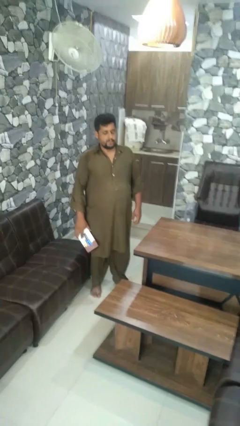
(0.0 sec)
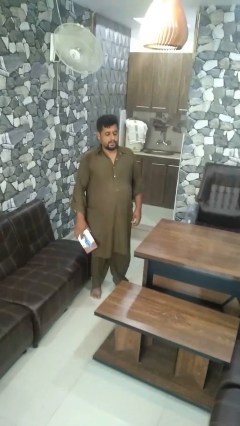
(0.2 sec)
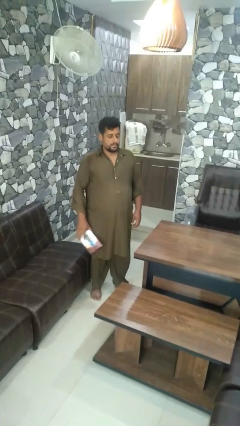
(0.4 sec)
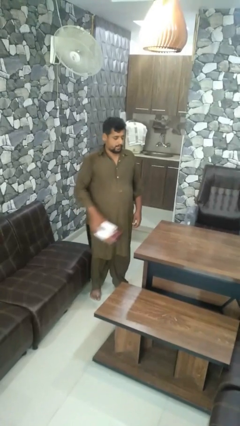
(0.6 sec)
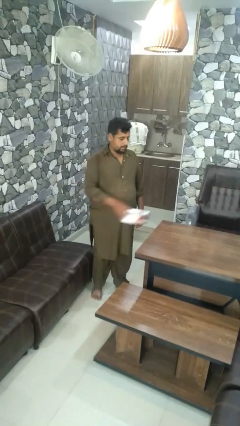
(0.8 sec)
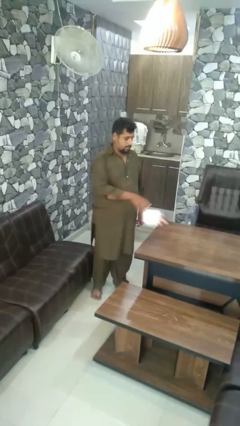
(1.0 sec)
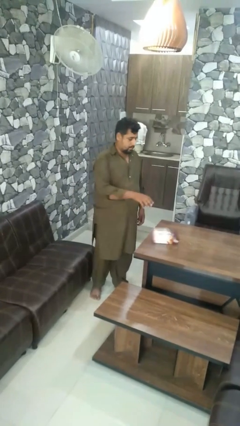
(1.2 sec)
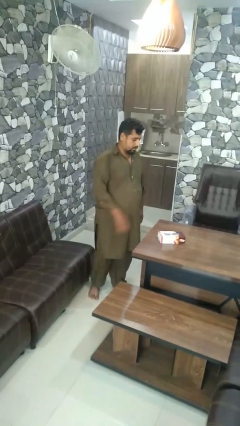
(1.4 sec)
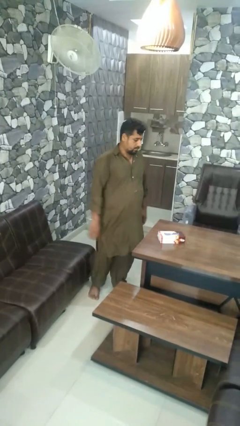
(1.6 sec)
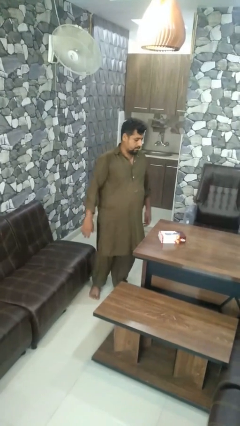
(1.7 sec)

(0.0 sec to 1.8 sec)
person throws object on table

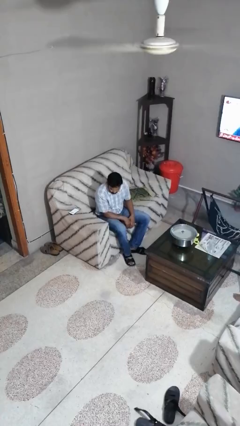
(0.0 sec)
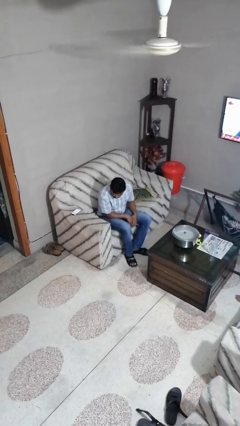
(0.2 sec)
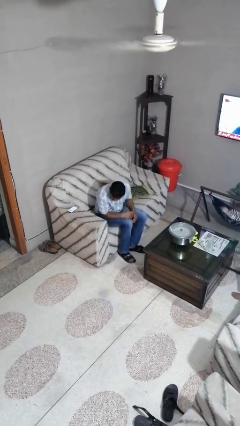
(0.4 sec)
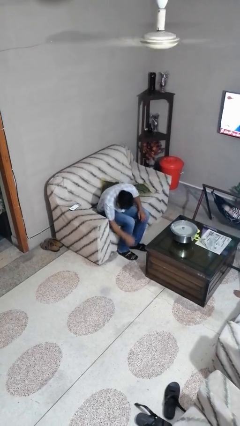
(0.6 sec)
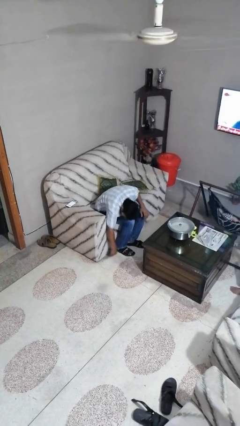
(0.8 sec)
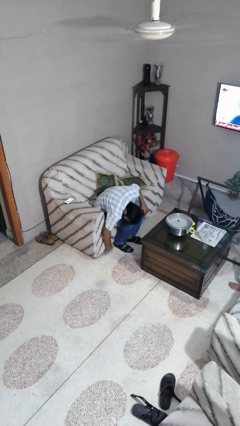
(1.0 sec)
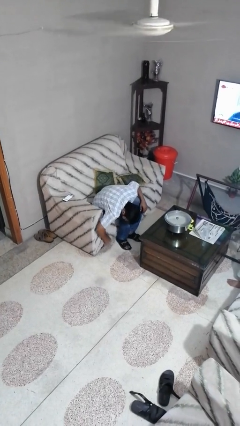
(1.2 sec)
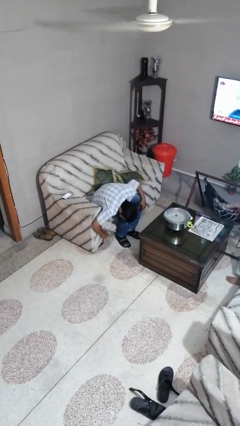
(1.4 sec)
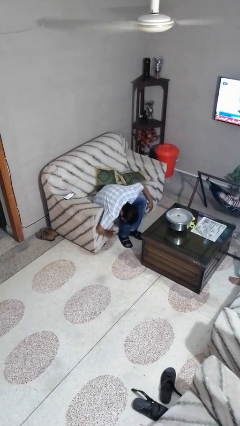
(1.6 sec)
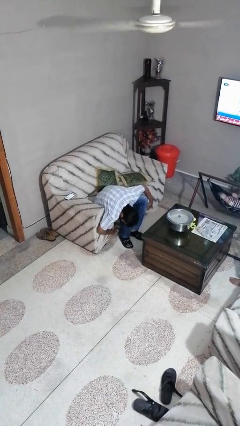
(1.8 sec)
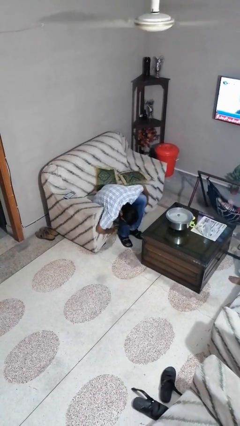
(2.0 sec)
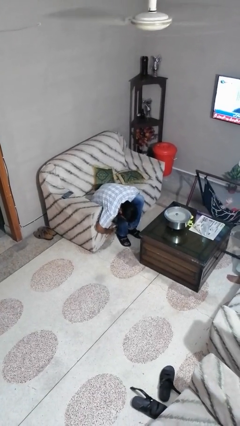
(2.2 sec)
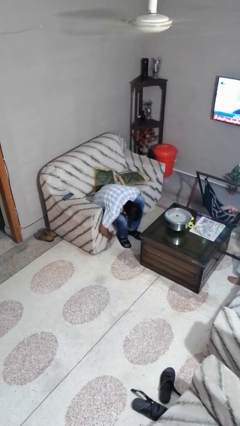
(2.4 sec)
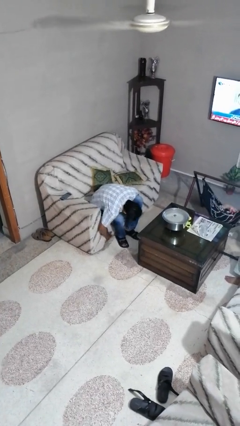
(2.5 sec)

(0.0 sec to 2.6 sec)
person searches under couch

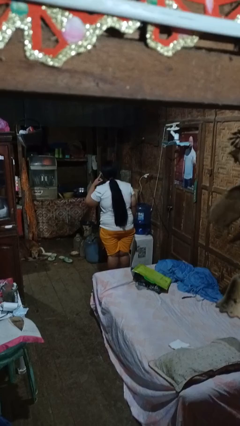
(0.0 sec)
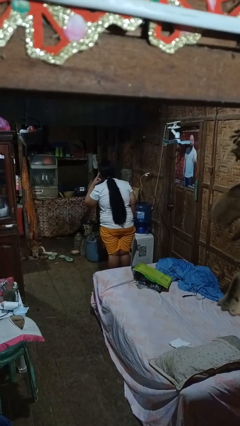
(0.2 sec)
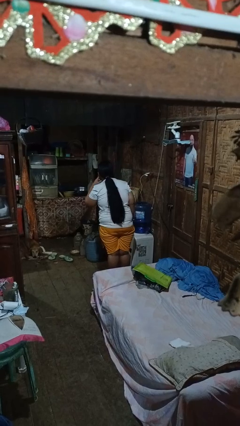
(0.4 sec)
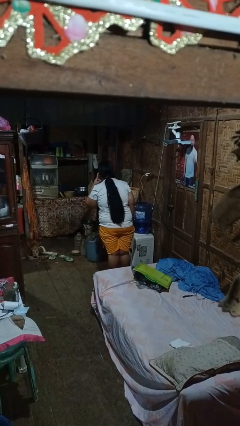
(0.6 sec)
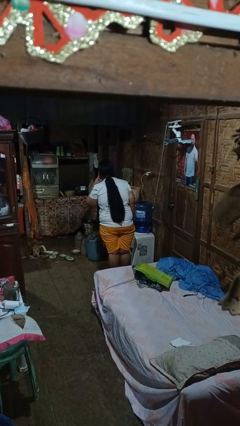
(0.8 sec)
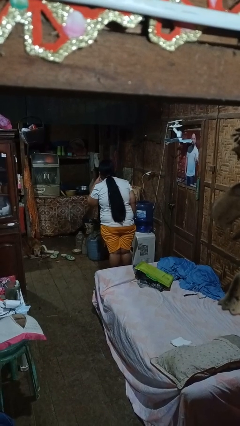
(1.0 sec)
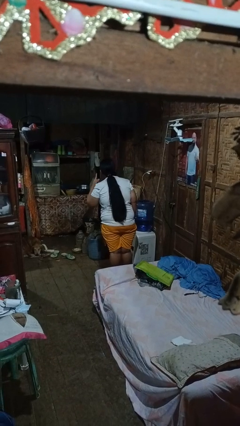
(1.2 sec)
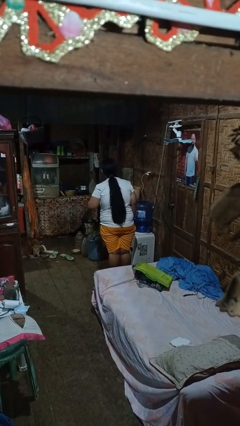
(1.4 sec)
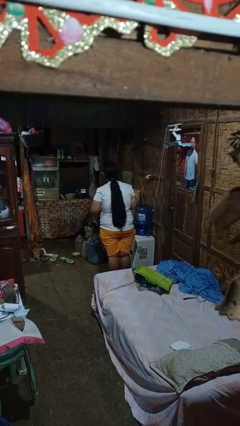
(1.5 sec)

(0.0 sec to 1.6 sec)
person gestures listen closely

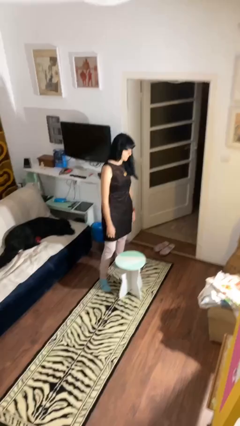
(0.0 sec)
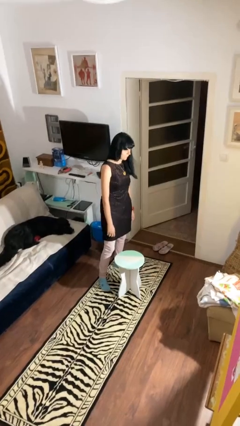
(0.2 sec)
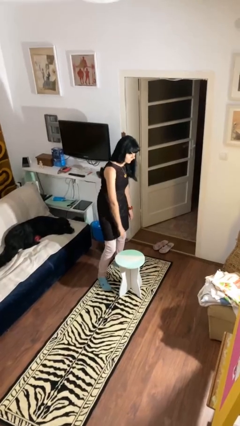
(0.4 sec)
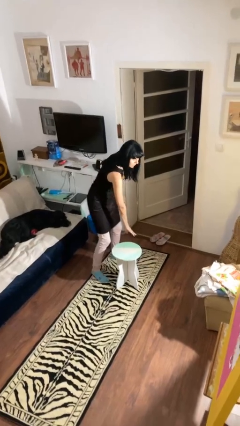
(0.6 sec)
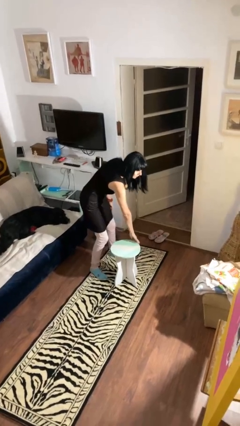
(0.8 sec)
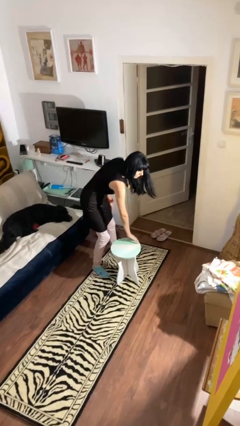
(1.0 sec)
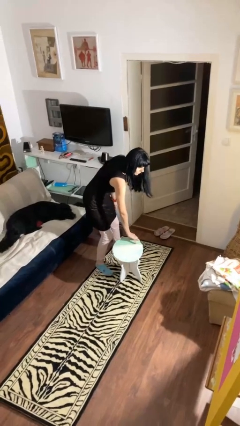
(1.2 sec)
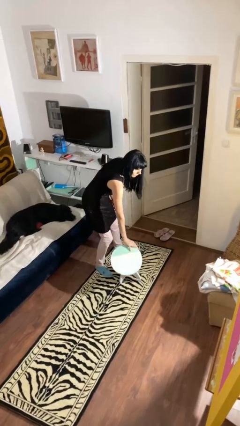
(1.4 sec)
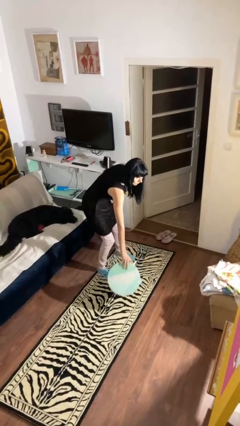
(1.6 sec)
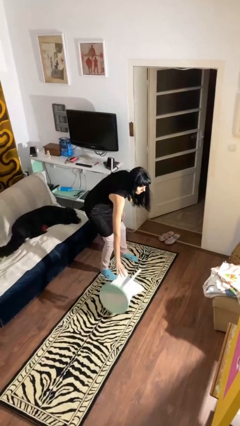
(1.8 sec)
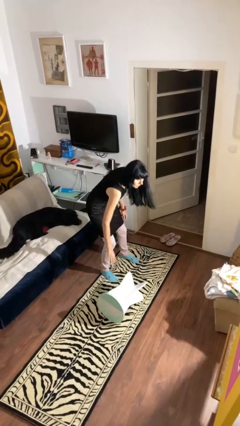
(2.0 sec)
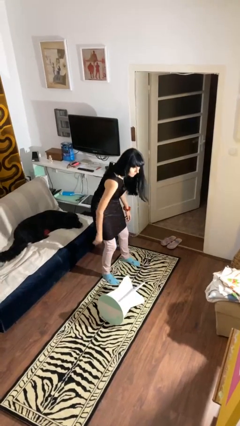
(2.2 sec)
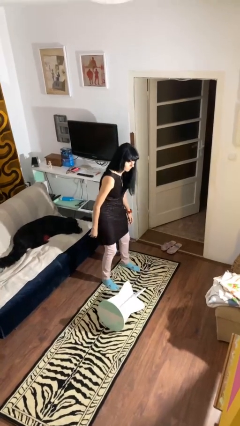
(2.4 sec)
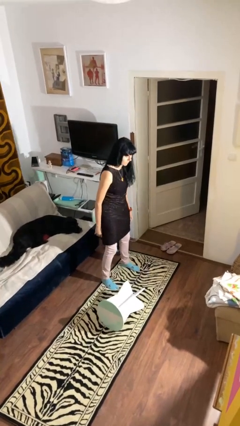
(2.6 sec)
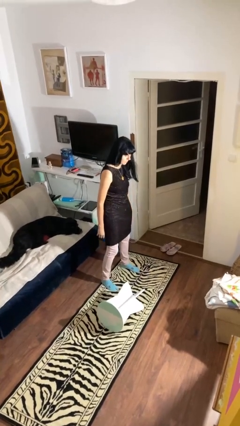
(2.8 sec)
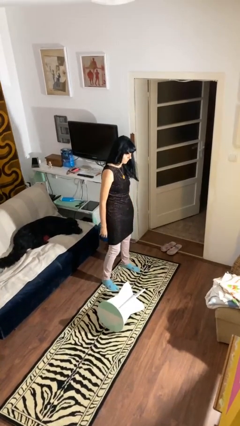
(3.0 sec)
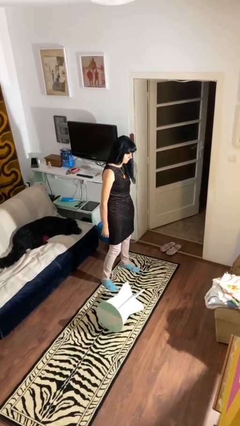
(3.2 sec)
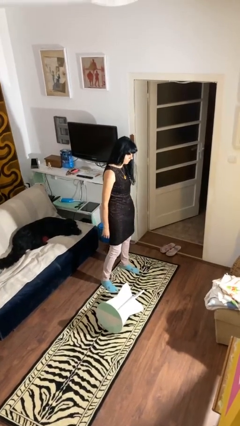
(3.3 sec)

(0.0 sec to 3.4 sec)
person knocks over furniture

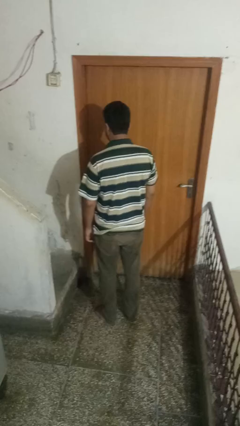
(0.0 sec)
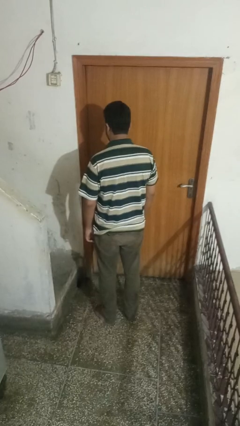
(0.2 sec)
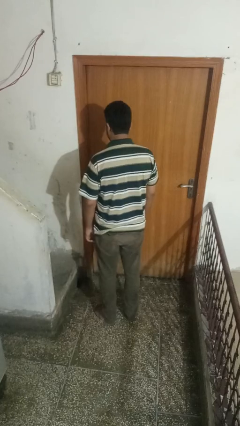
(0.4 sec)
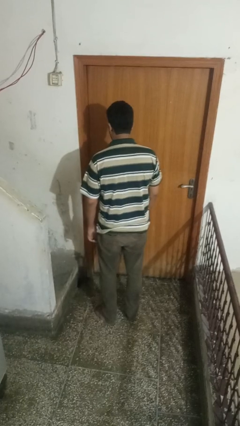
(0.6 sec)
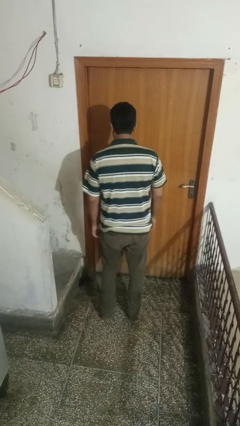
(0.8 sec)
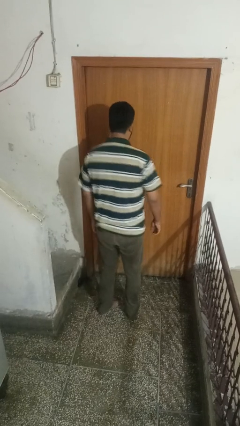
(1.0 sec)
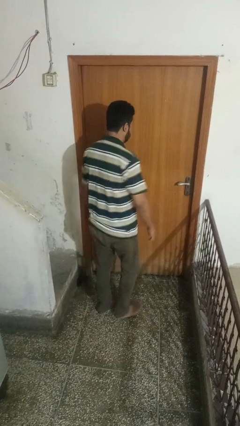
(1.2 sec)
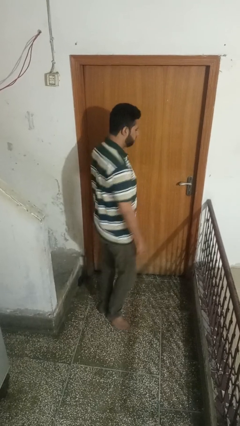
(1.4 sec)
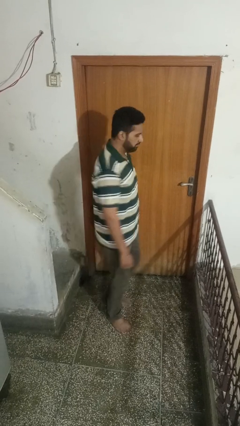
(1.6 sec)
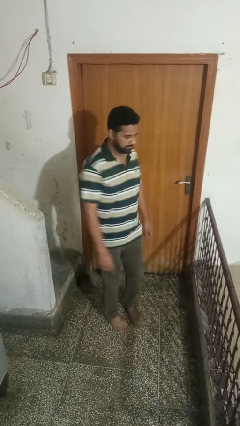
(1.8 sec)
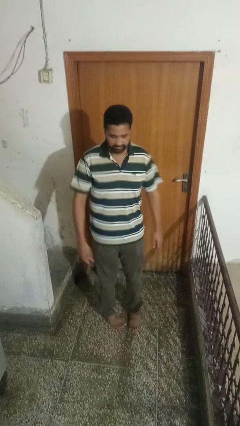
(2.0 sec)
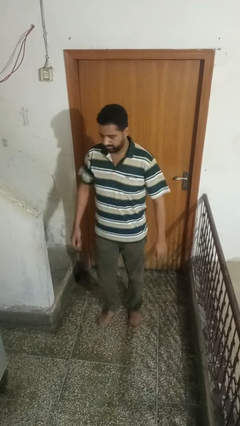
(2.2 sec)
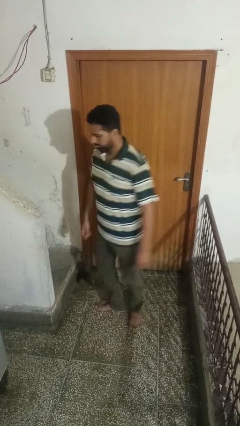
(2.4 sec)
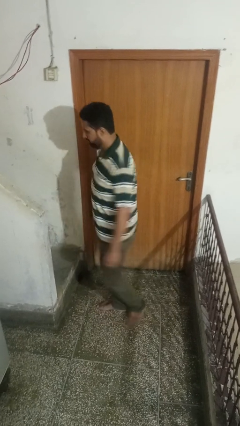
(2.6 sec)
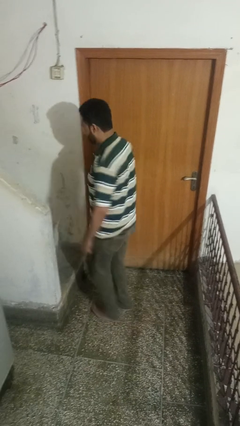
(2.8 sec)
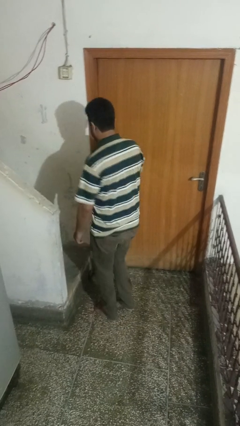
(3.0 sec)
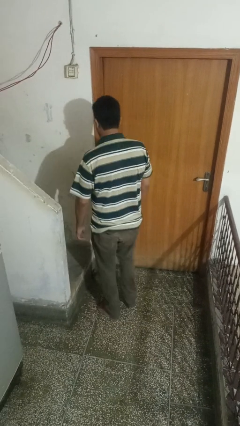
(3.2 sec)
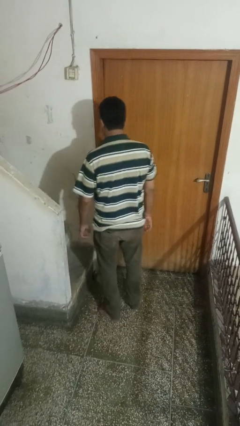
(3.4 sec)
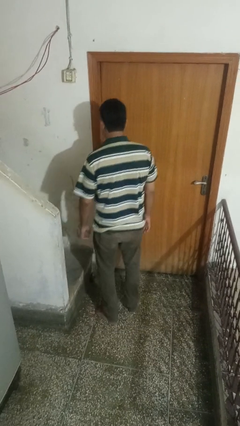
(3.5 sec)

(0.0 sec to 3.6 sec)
person twirls

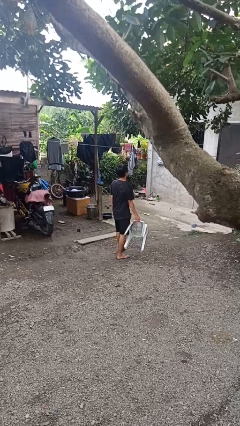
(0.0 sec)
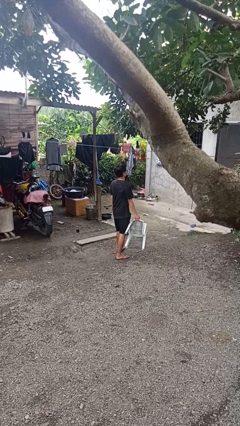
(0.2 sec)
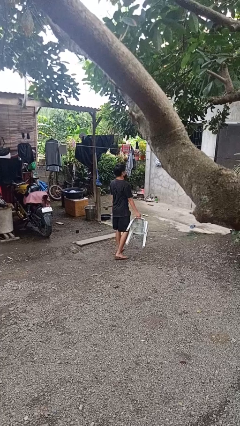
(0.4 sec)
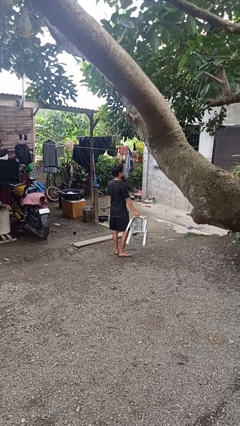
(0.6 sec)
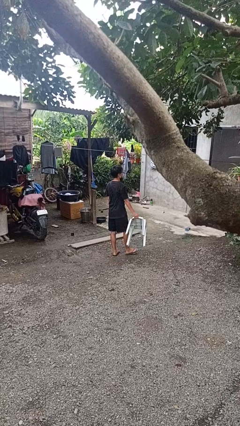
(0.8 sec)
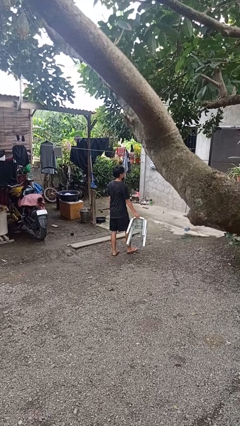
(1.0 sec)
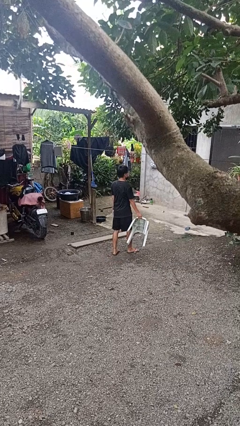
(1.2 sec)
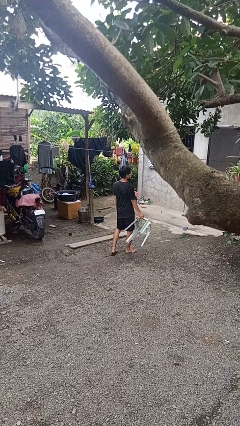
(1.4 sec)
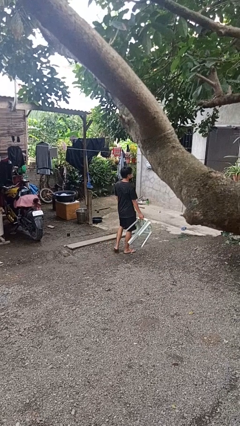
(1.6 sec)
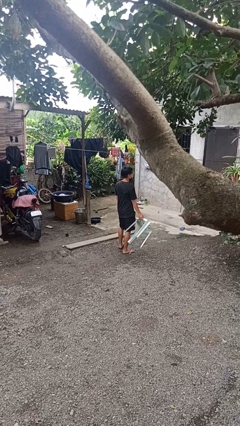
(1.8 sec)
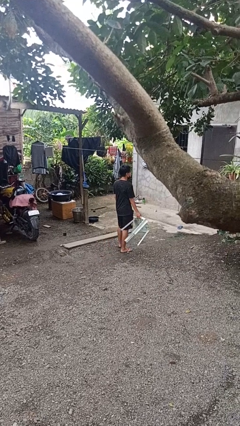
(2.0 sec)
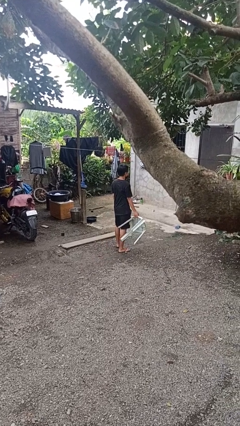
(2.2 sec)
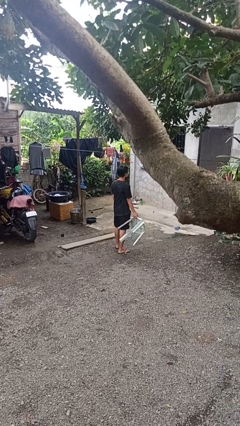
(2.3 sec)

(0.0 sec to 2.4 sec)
person carries furniture

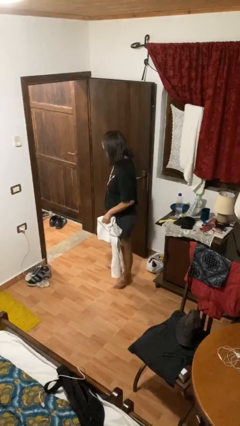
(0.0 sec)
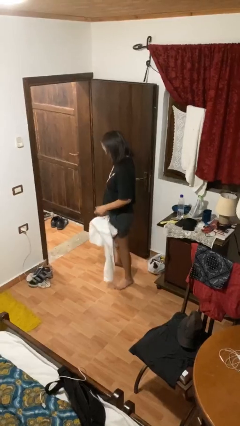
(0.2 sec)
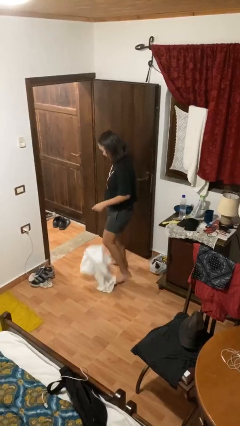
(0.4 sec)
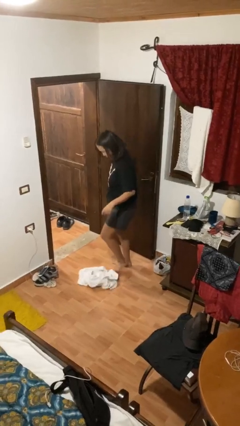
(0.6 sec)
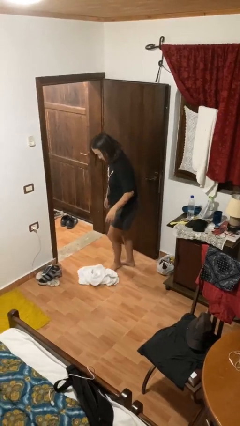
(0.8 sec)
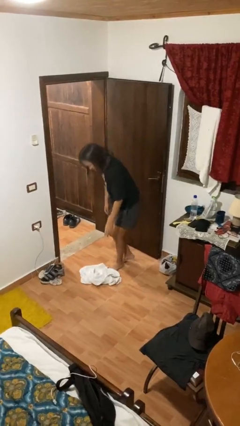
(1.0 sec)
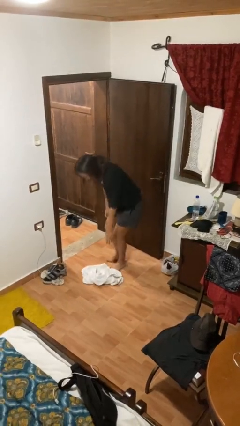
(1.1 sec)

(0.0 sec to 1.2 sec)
person drops object

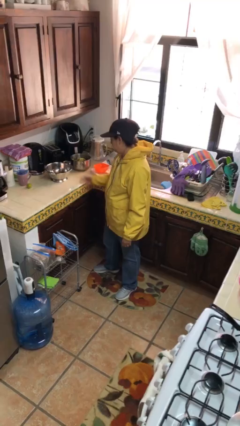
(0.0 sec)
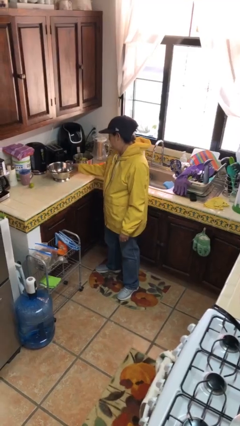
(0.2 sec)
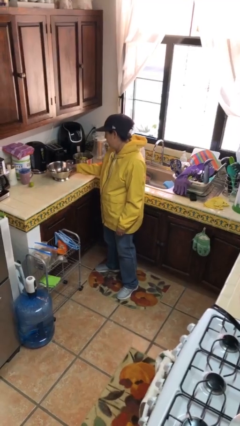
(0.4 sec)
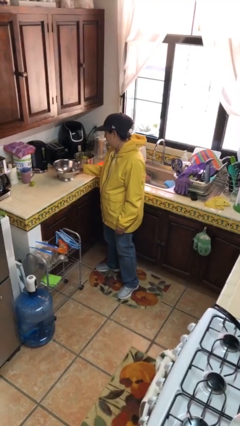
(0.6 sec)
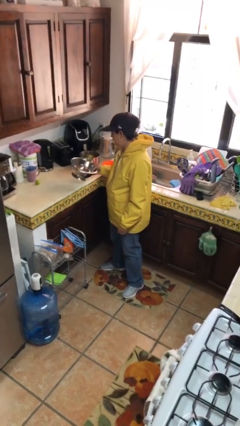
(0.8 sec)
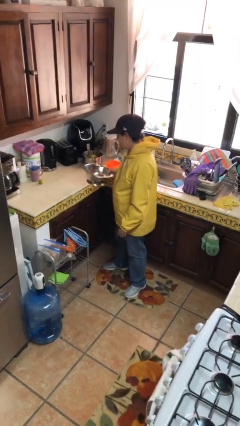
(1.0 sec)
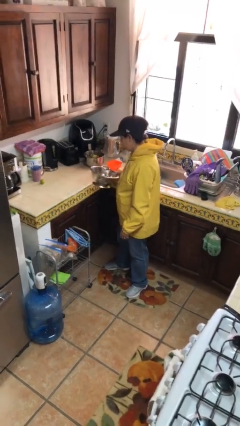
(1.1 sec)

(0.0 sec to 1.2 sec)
person picks up object from countertop
